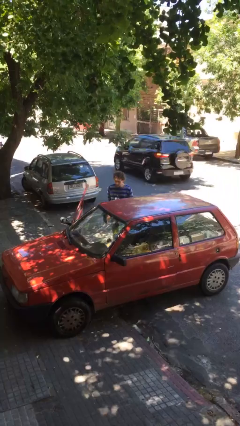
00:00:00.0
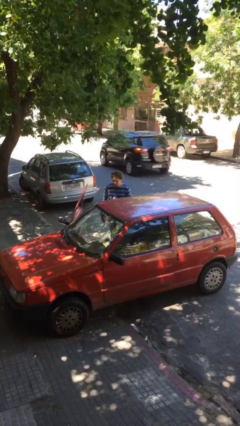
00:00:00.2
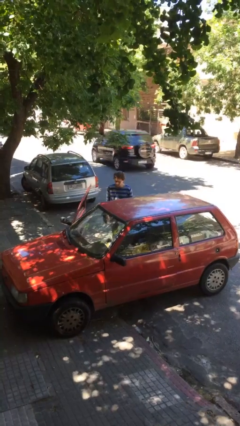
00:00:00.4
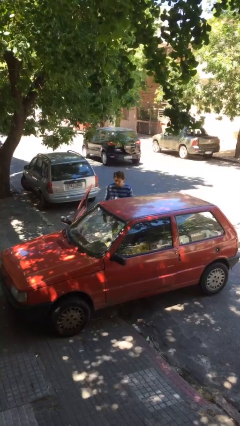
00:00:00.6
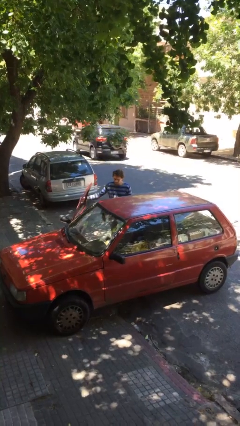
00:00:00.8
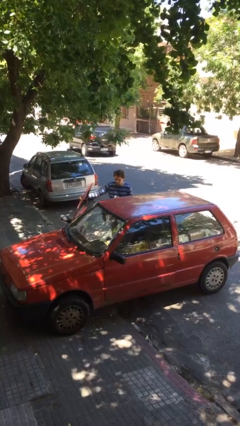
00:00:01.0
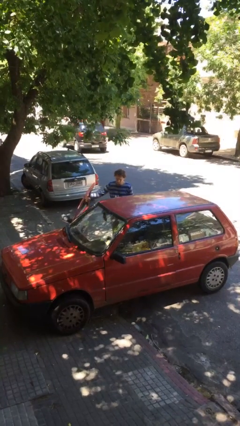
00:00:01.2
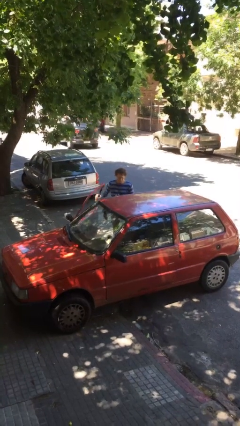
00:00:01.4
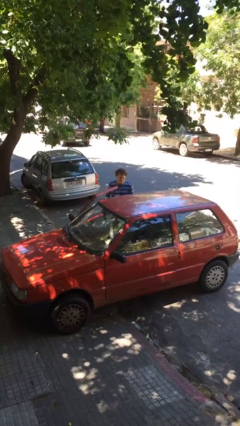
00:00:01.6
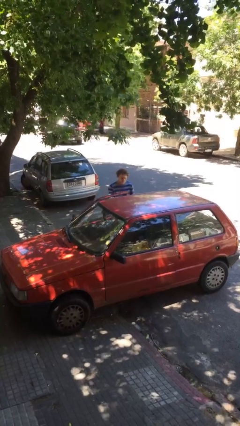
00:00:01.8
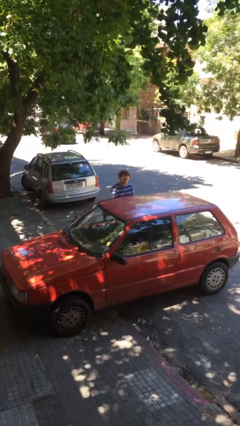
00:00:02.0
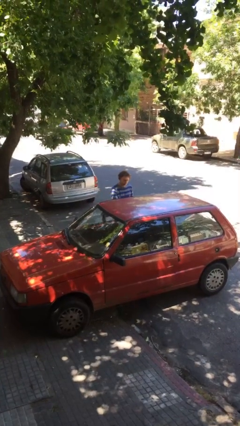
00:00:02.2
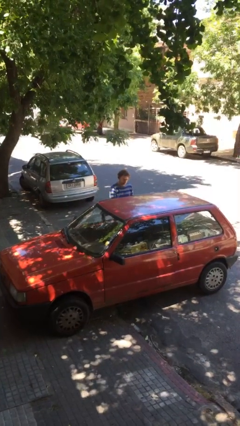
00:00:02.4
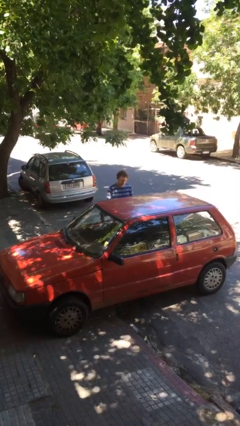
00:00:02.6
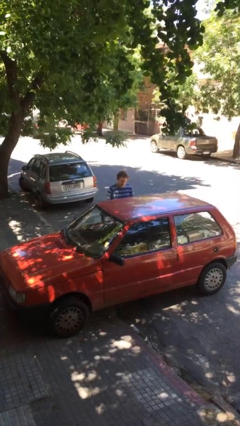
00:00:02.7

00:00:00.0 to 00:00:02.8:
person closes car door

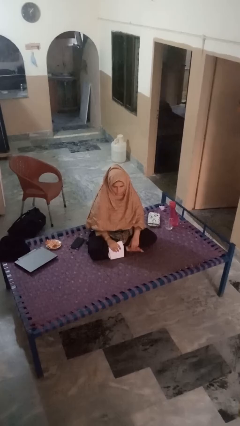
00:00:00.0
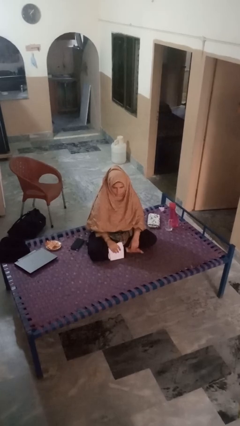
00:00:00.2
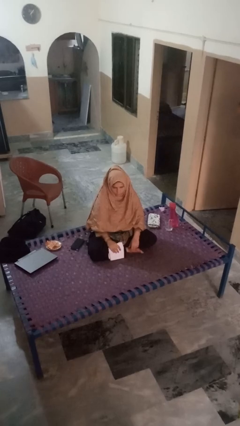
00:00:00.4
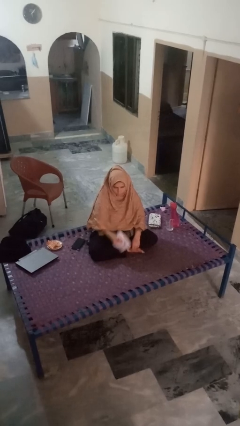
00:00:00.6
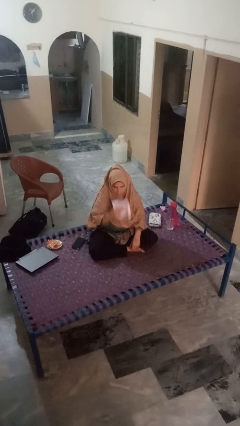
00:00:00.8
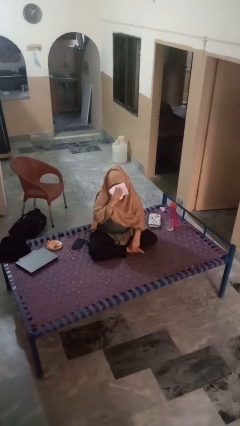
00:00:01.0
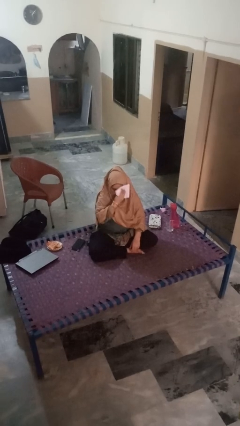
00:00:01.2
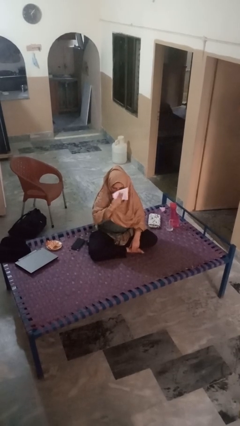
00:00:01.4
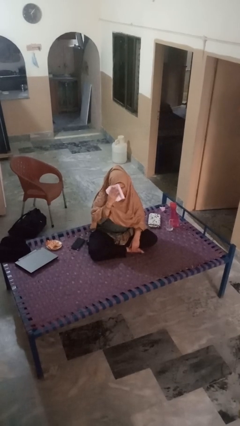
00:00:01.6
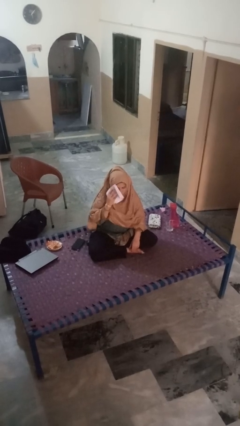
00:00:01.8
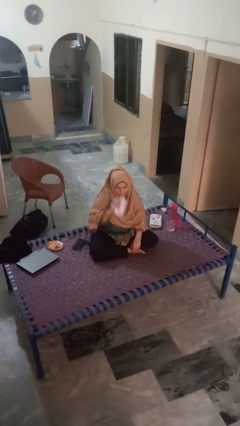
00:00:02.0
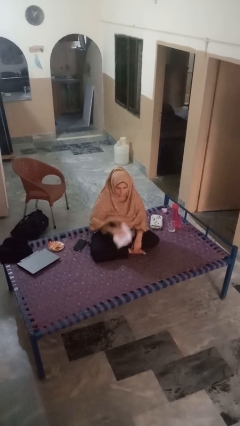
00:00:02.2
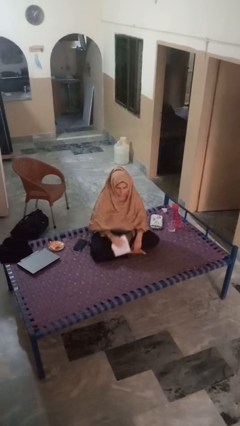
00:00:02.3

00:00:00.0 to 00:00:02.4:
person wipes mouth with napkin

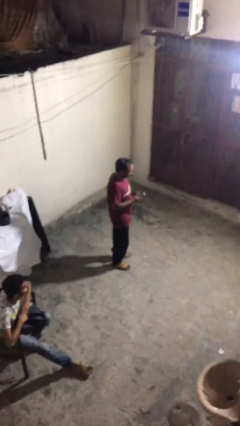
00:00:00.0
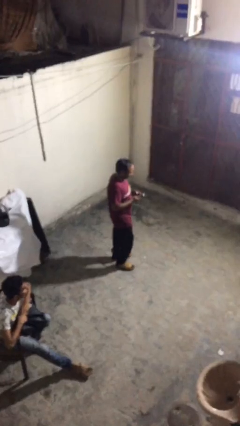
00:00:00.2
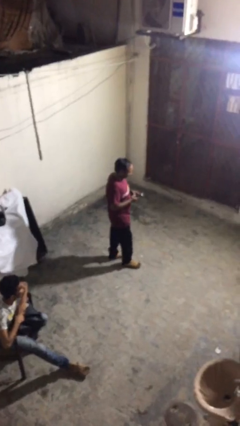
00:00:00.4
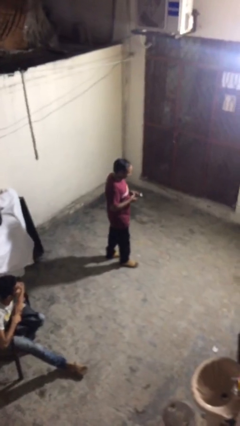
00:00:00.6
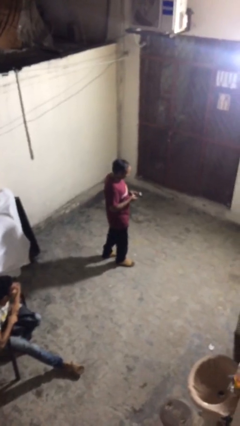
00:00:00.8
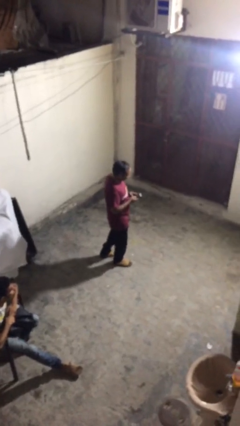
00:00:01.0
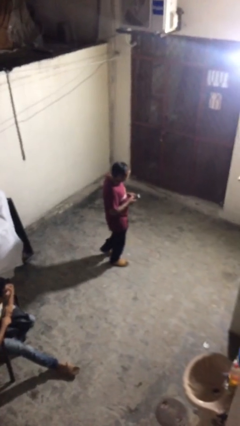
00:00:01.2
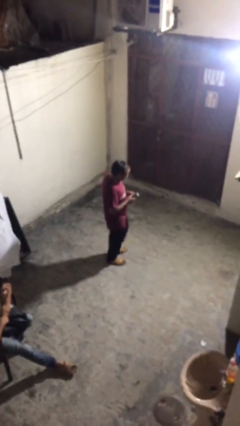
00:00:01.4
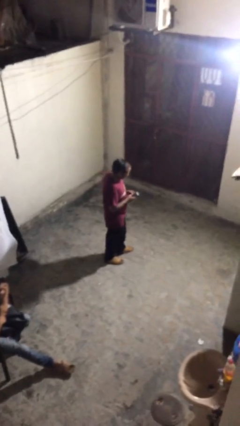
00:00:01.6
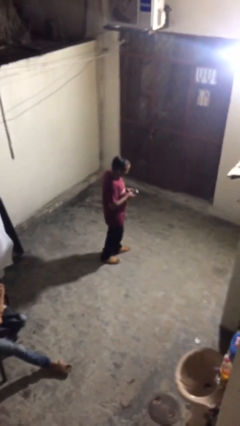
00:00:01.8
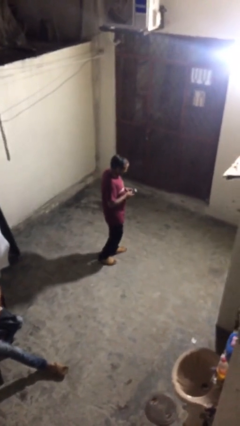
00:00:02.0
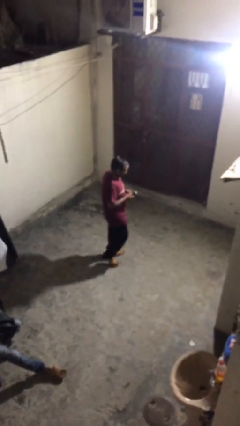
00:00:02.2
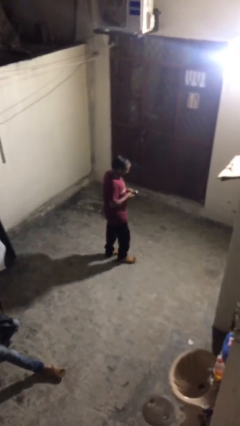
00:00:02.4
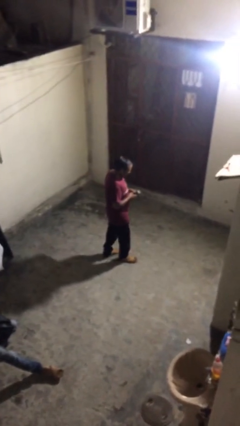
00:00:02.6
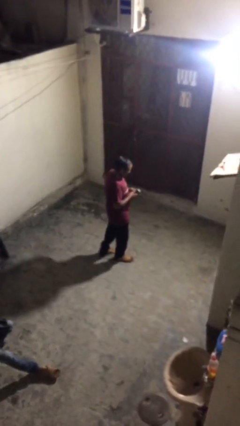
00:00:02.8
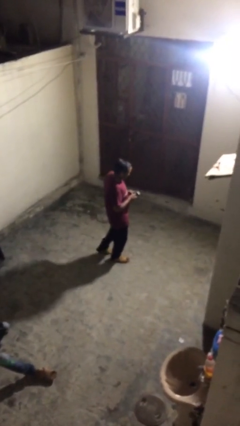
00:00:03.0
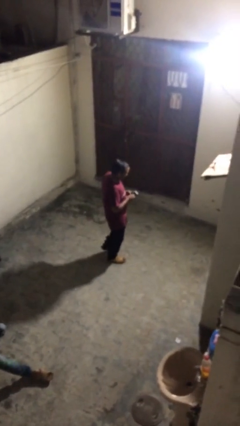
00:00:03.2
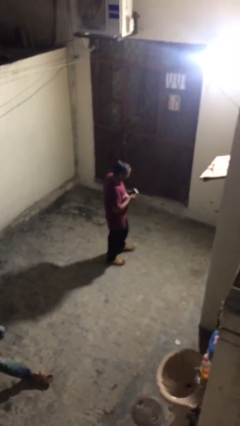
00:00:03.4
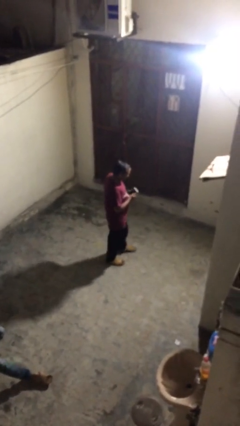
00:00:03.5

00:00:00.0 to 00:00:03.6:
person texts on phone

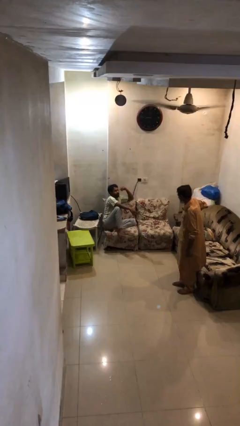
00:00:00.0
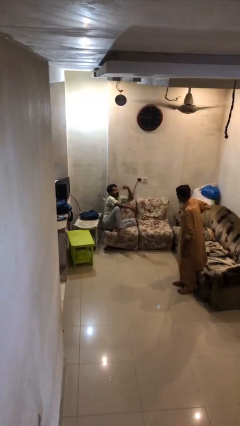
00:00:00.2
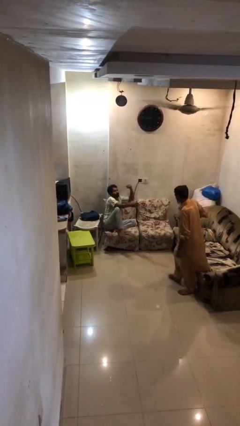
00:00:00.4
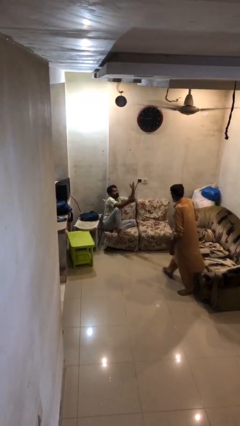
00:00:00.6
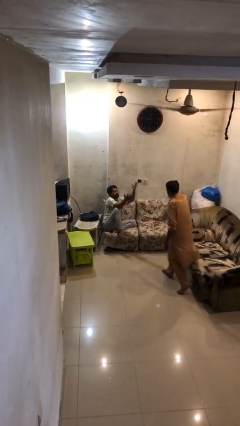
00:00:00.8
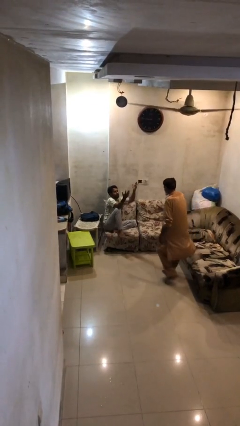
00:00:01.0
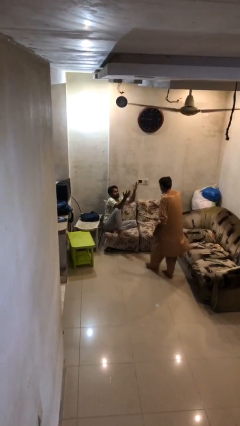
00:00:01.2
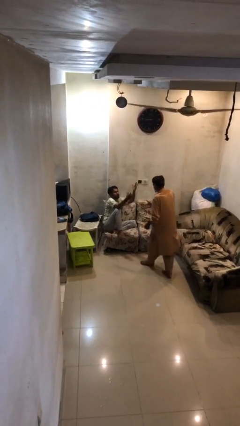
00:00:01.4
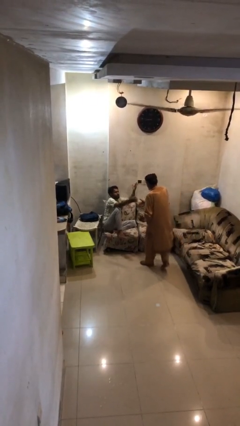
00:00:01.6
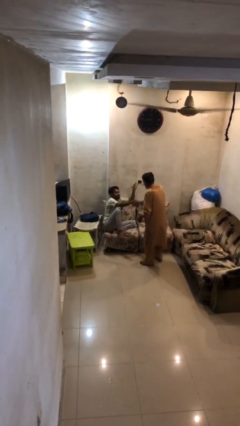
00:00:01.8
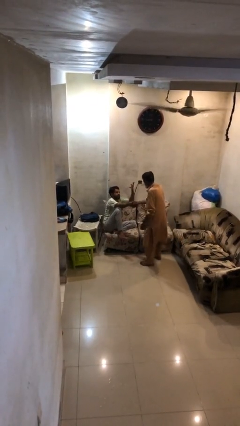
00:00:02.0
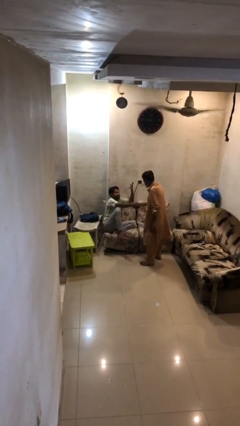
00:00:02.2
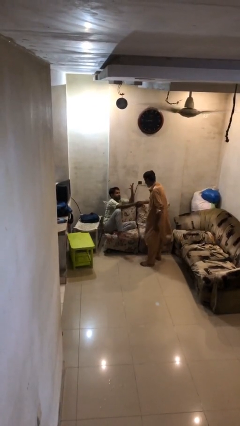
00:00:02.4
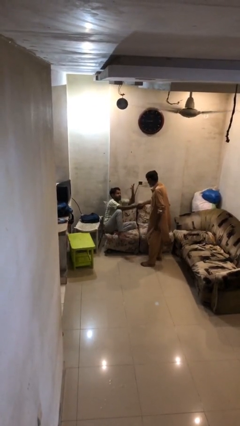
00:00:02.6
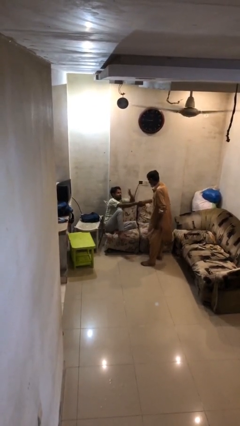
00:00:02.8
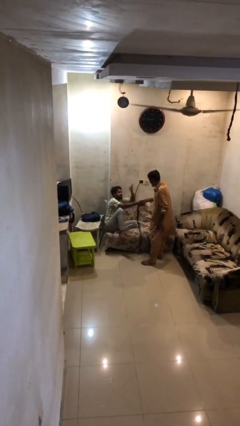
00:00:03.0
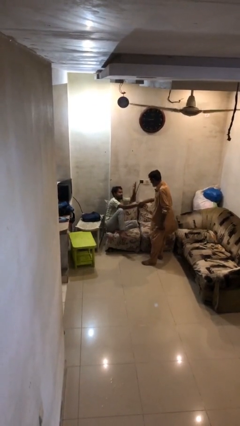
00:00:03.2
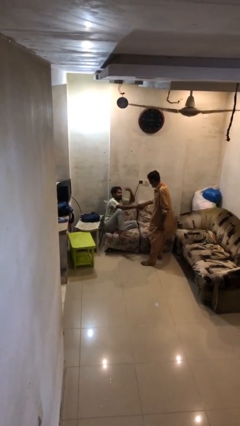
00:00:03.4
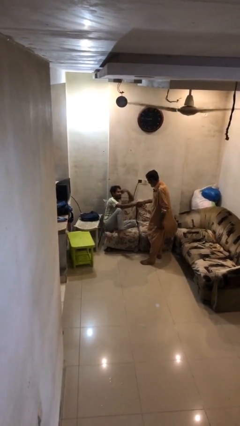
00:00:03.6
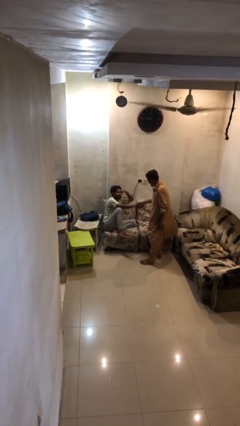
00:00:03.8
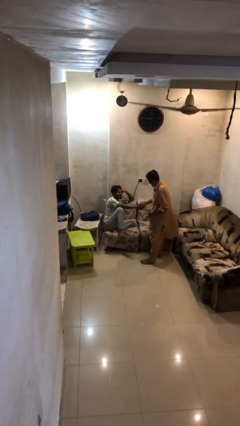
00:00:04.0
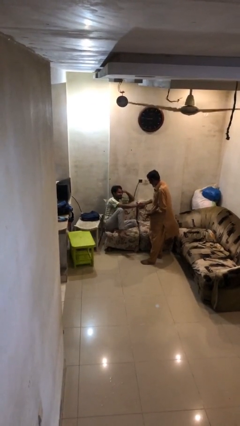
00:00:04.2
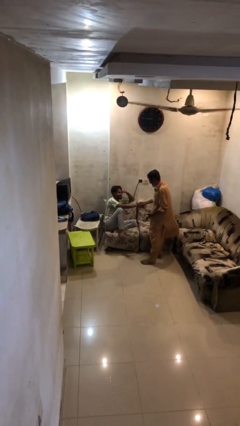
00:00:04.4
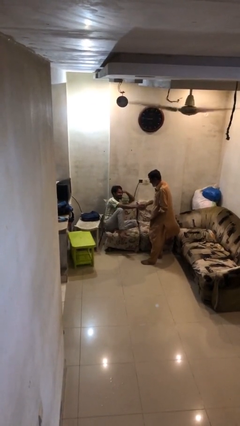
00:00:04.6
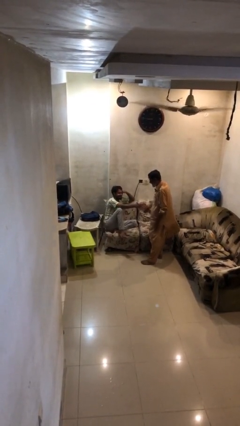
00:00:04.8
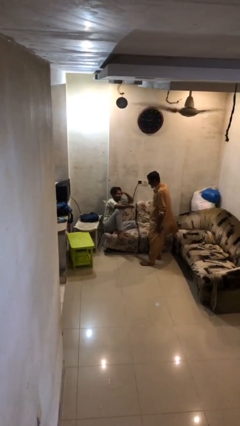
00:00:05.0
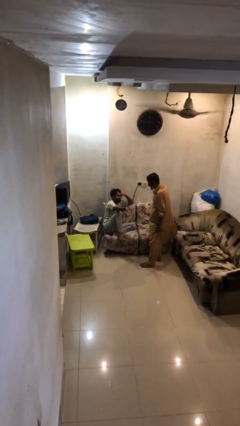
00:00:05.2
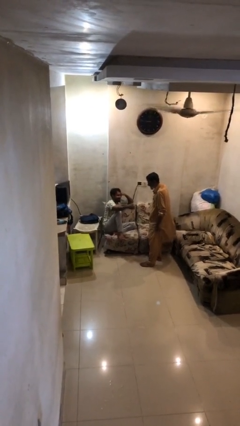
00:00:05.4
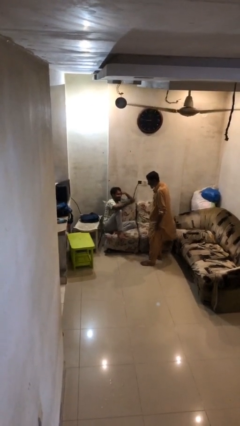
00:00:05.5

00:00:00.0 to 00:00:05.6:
person shakes hand

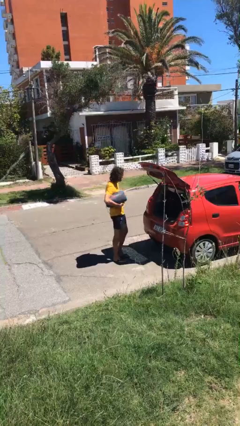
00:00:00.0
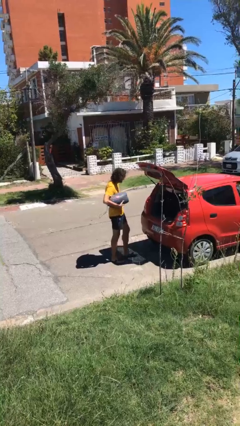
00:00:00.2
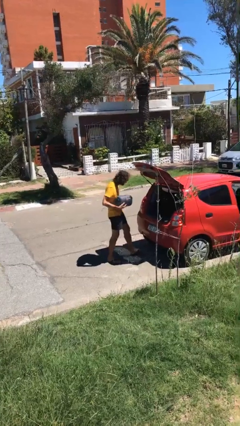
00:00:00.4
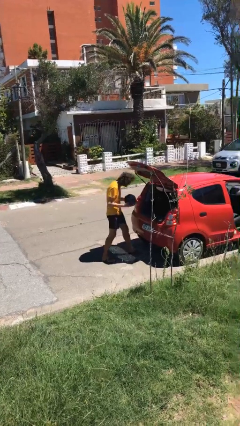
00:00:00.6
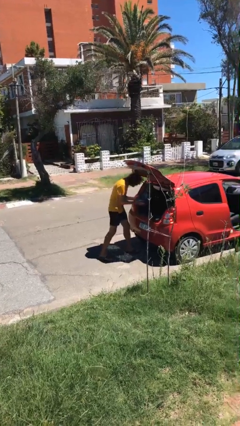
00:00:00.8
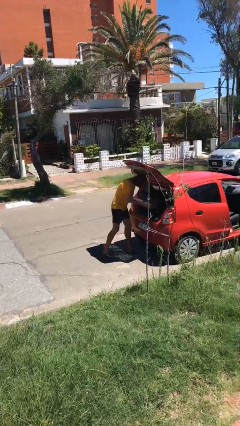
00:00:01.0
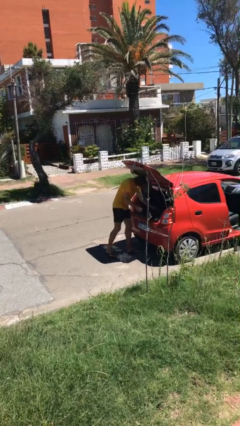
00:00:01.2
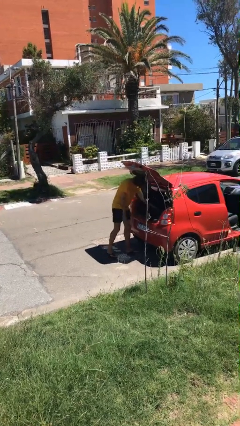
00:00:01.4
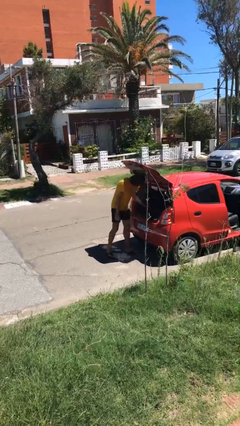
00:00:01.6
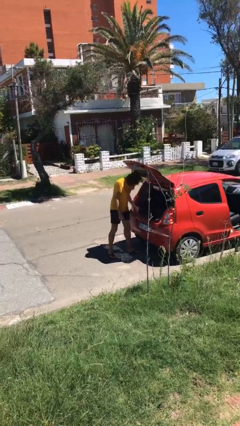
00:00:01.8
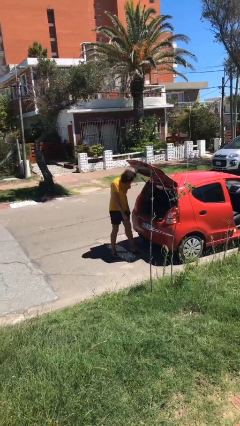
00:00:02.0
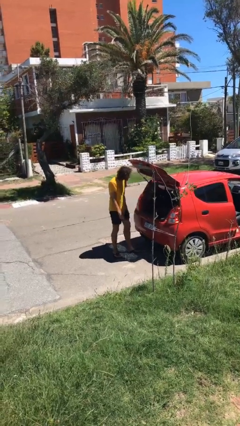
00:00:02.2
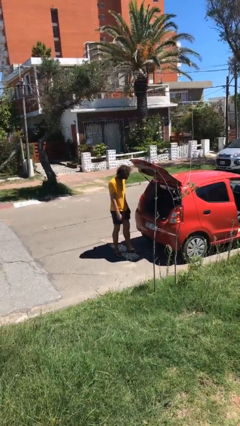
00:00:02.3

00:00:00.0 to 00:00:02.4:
person loads car

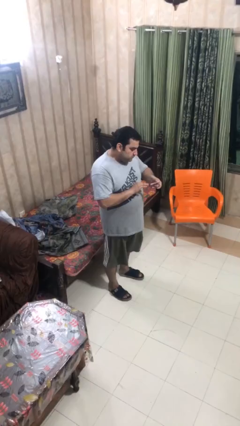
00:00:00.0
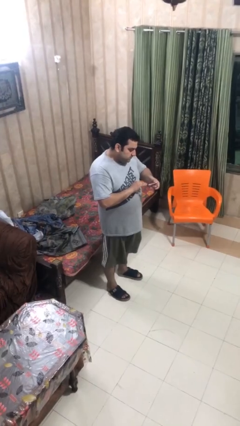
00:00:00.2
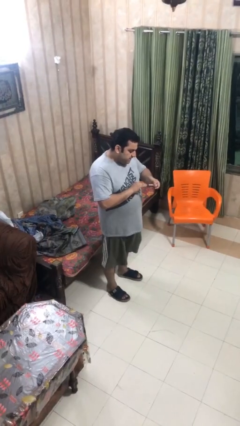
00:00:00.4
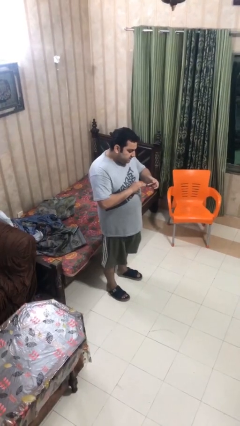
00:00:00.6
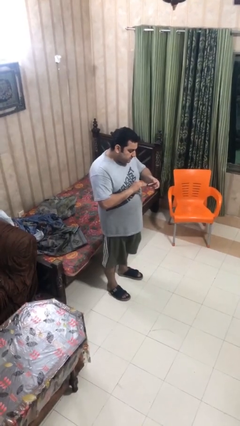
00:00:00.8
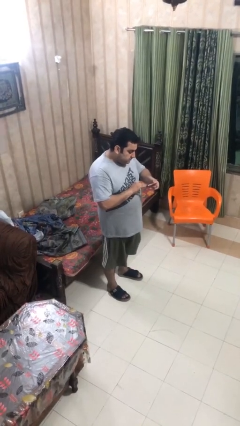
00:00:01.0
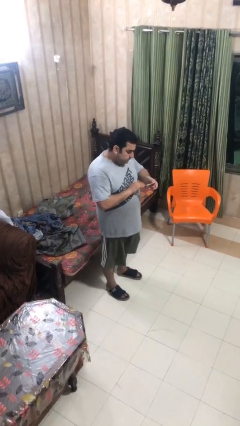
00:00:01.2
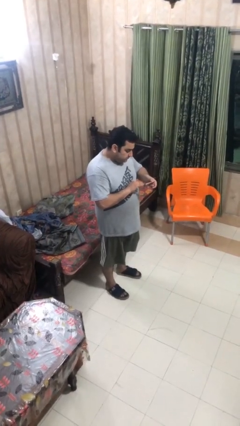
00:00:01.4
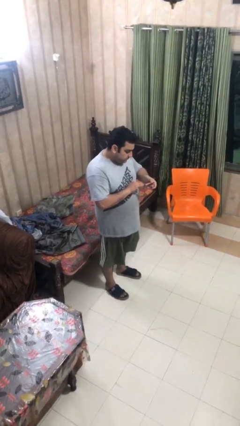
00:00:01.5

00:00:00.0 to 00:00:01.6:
person clips fingernails
